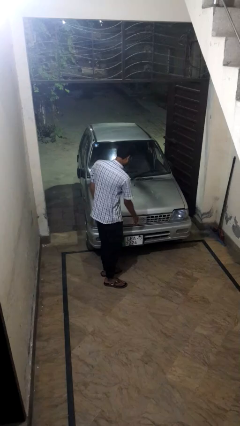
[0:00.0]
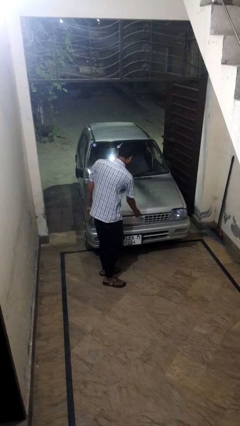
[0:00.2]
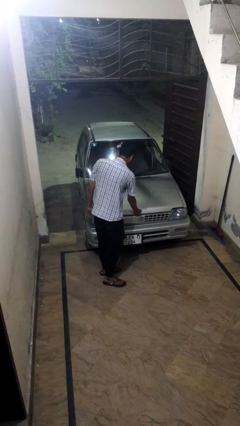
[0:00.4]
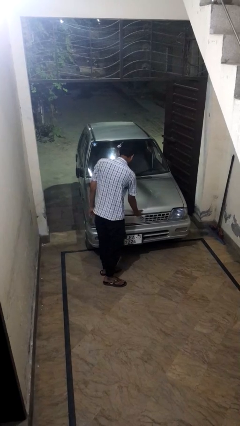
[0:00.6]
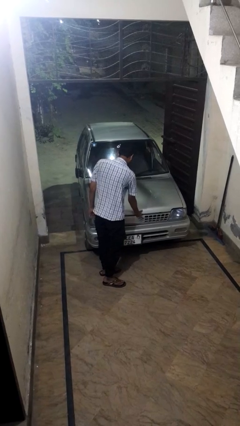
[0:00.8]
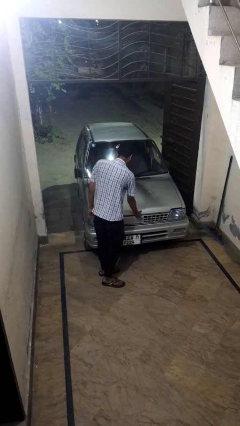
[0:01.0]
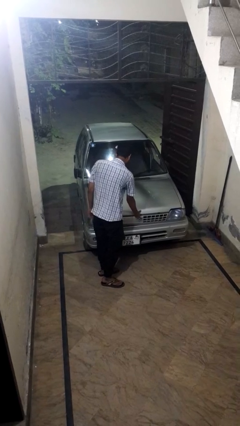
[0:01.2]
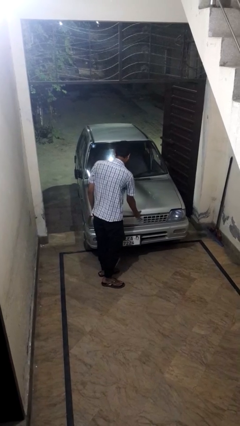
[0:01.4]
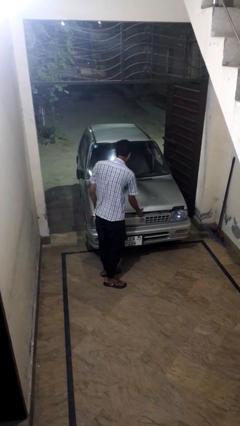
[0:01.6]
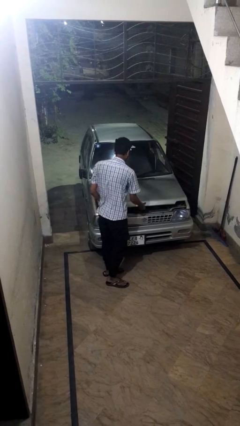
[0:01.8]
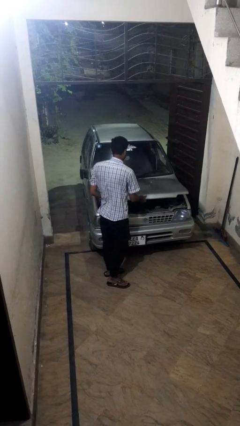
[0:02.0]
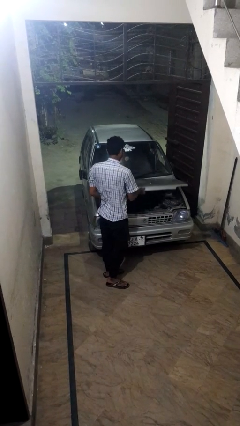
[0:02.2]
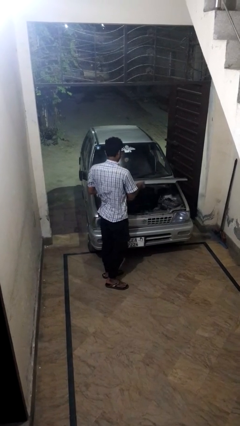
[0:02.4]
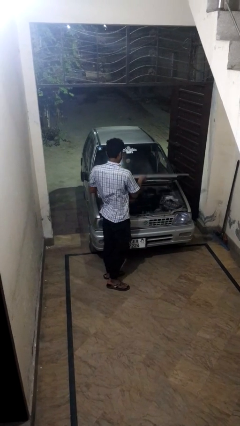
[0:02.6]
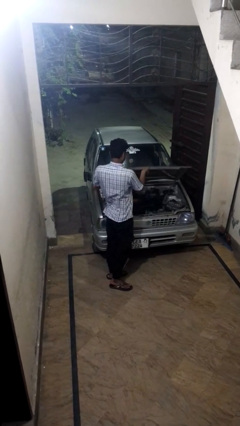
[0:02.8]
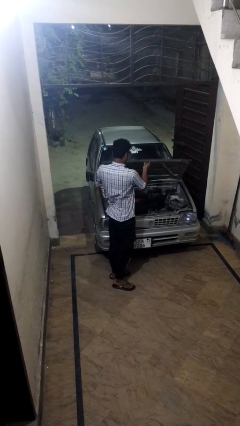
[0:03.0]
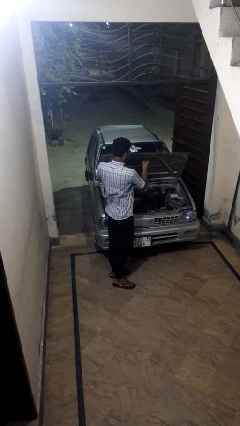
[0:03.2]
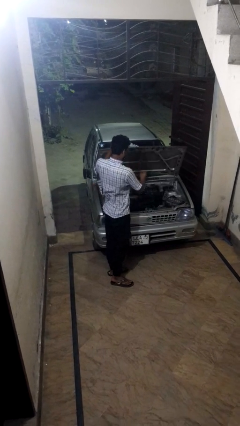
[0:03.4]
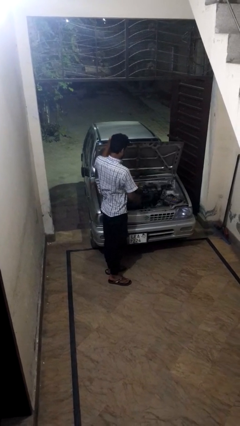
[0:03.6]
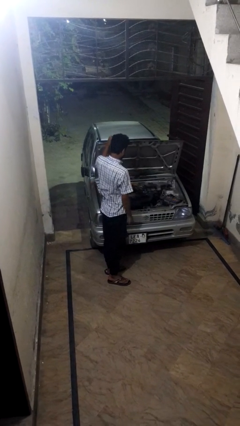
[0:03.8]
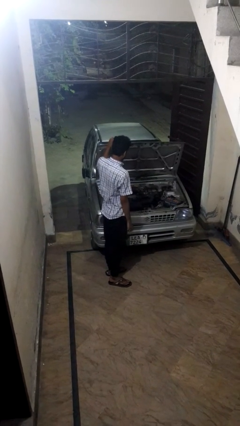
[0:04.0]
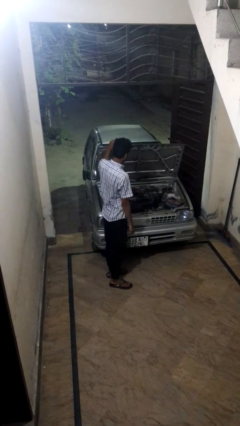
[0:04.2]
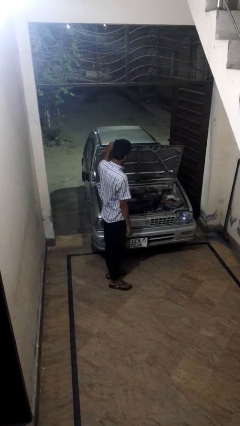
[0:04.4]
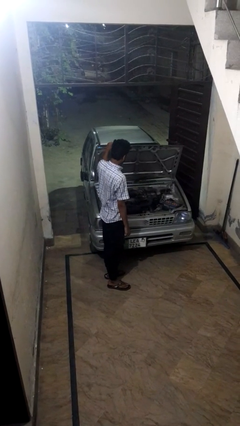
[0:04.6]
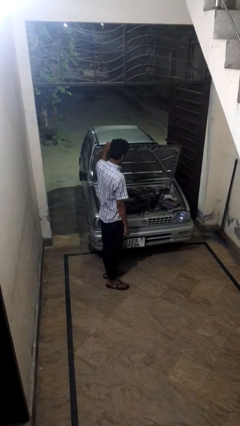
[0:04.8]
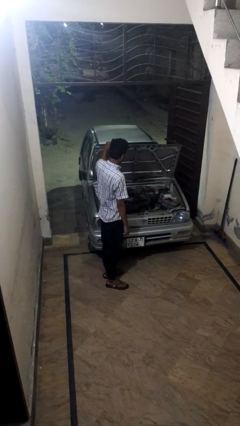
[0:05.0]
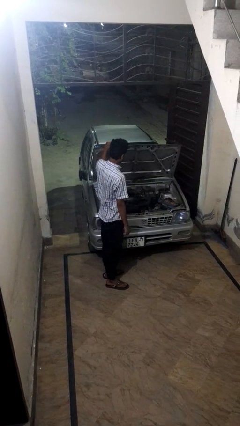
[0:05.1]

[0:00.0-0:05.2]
person opens car hood

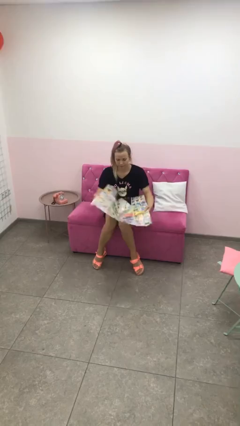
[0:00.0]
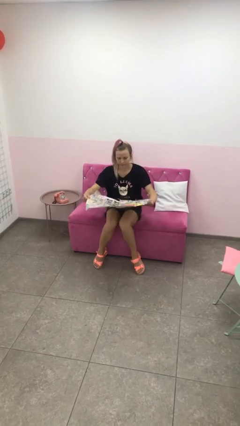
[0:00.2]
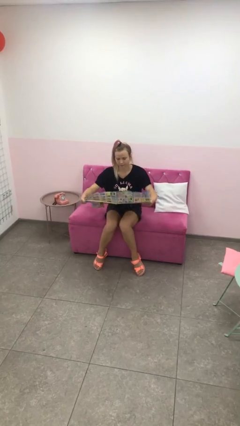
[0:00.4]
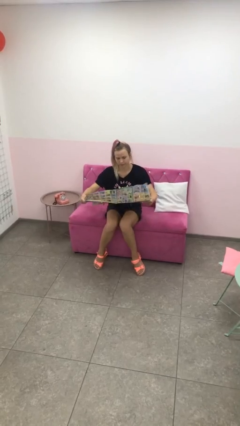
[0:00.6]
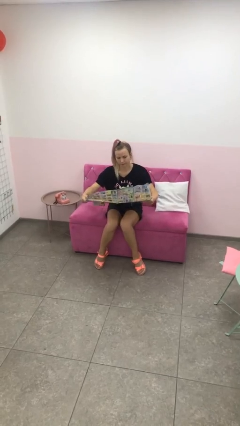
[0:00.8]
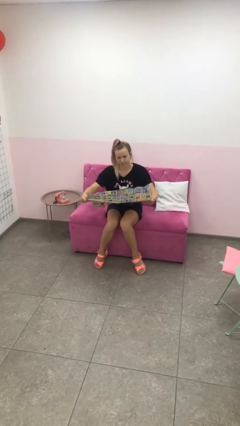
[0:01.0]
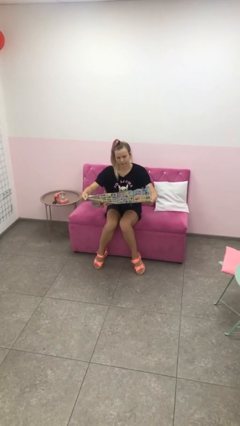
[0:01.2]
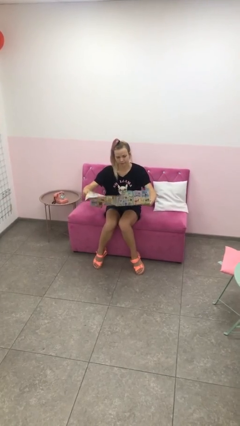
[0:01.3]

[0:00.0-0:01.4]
person reads newspaper

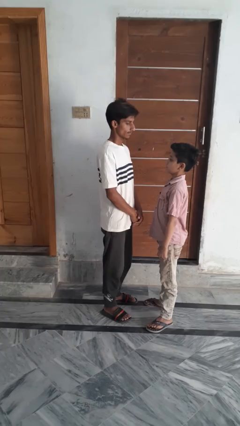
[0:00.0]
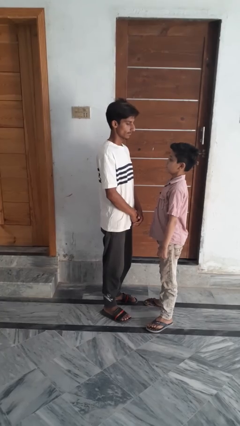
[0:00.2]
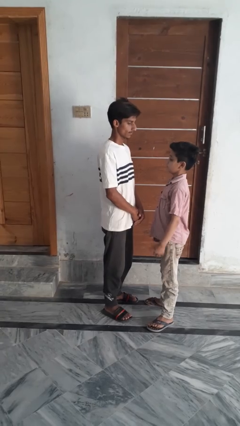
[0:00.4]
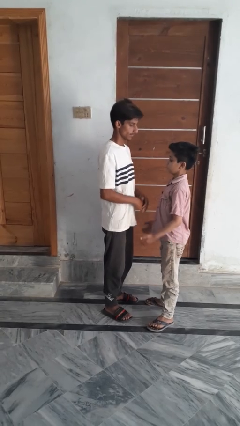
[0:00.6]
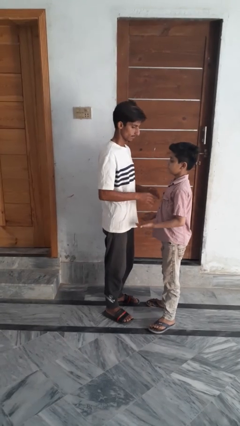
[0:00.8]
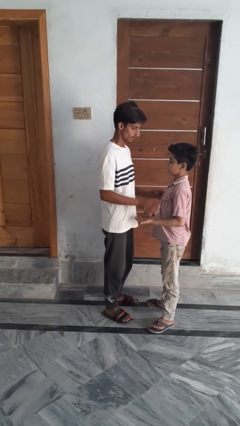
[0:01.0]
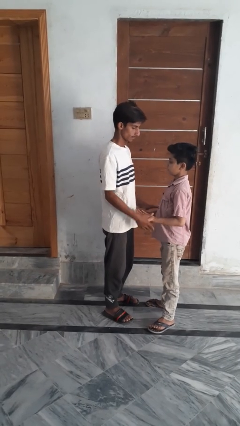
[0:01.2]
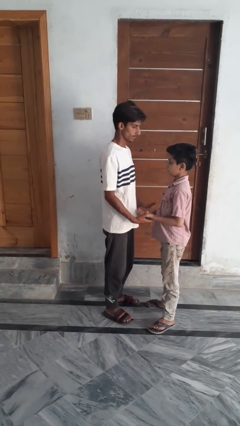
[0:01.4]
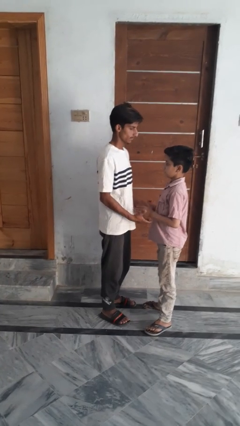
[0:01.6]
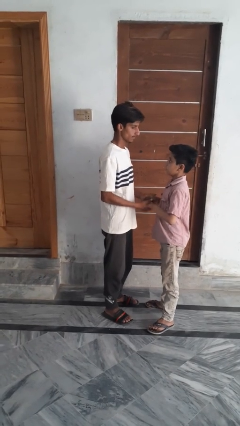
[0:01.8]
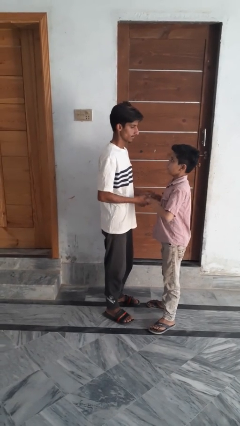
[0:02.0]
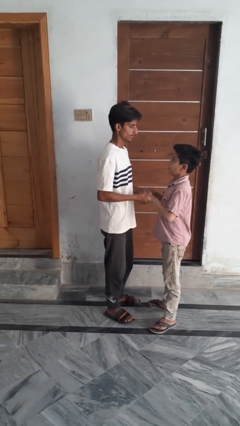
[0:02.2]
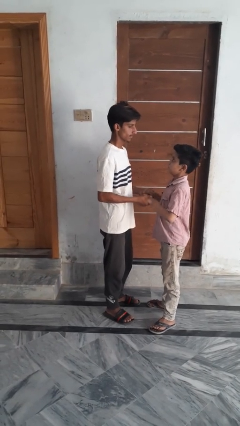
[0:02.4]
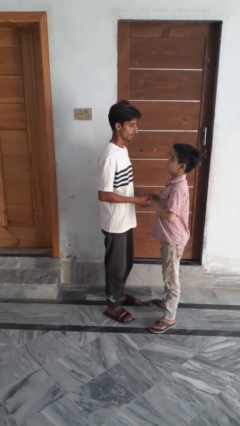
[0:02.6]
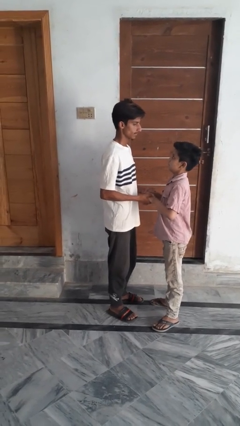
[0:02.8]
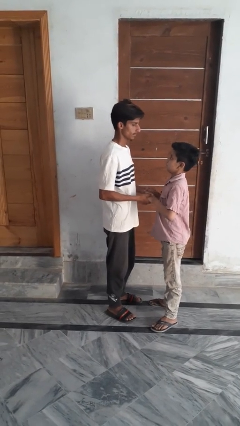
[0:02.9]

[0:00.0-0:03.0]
person highfives hand

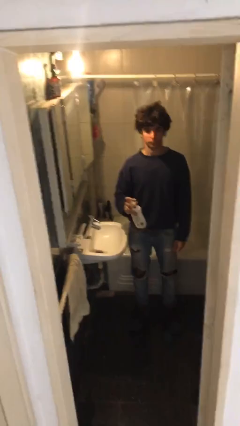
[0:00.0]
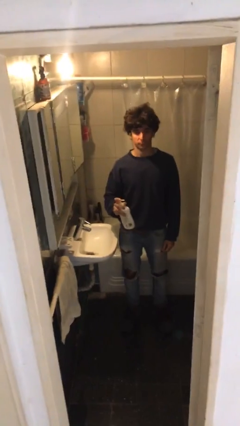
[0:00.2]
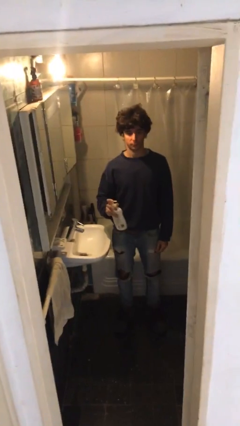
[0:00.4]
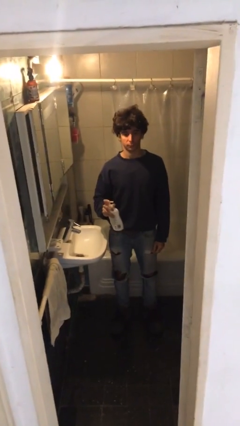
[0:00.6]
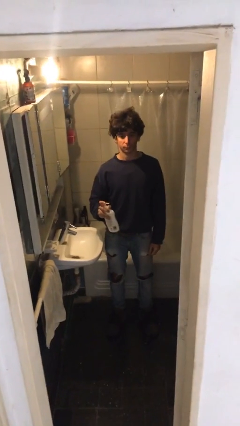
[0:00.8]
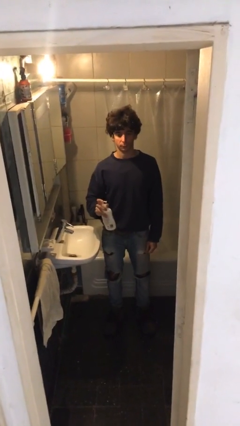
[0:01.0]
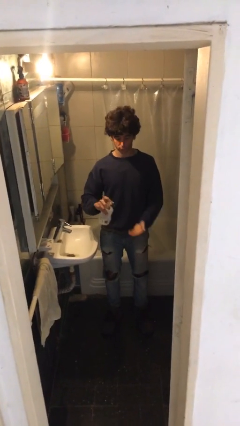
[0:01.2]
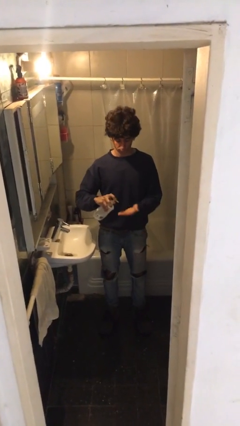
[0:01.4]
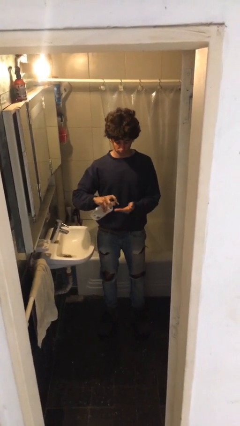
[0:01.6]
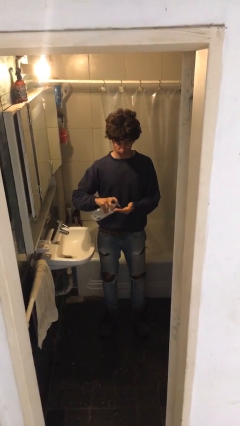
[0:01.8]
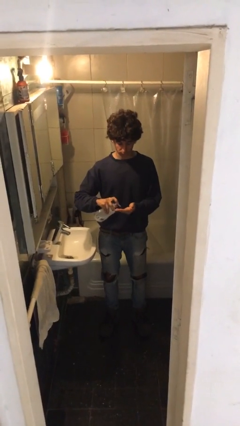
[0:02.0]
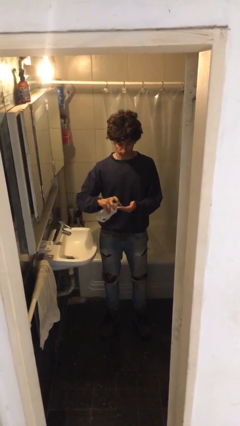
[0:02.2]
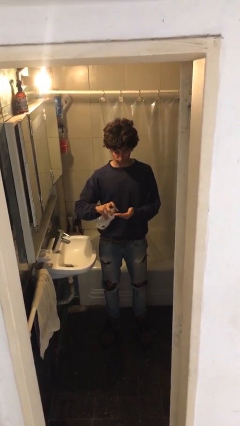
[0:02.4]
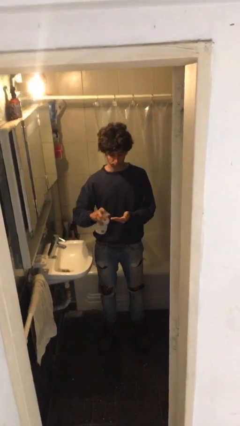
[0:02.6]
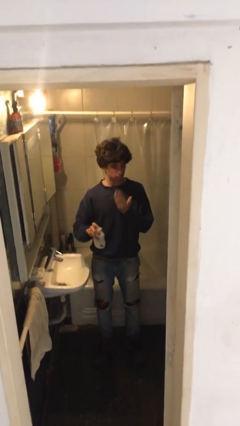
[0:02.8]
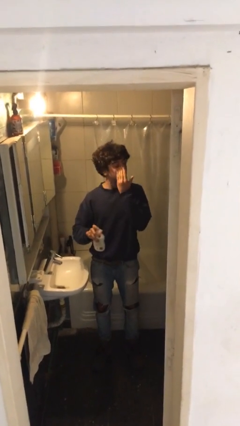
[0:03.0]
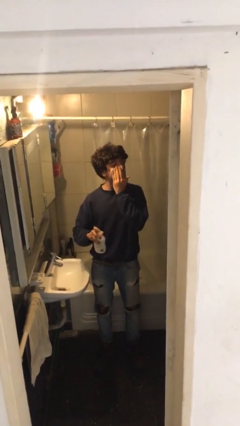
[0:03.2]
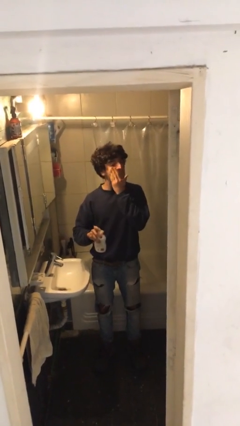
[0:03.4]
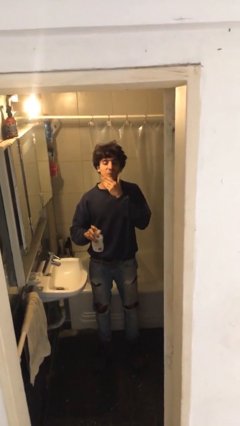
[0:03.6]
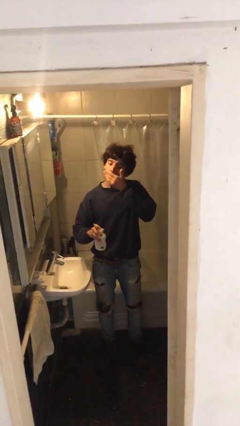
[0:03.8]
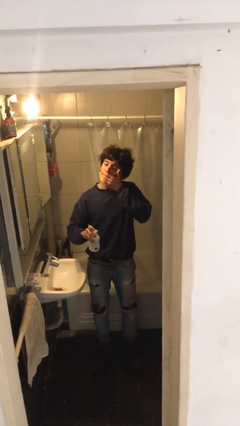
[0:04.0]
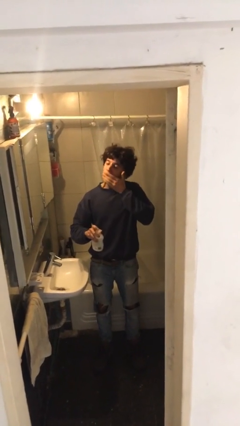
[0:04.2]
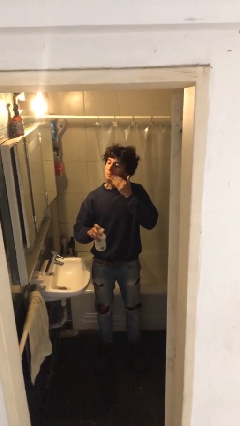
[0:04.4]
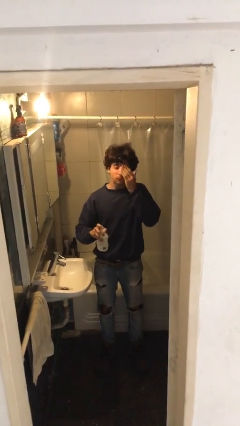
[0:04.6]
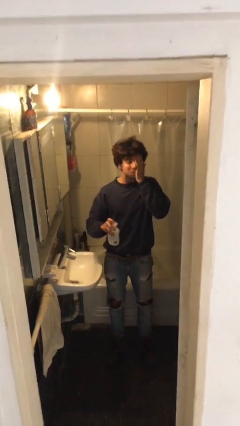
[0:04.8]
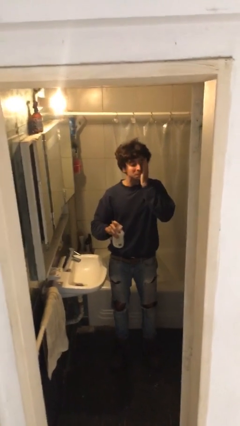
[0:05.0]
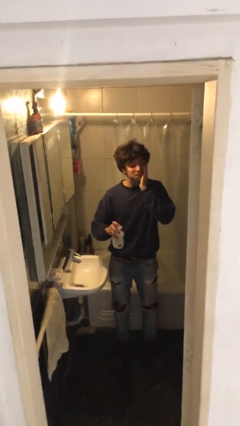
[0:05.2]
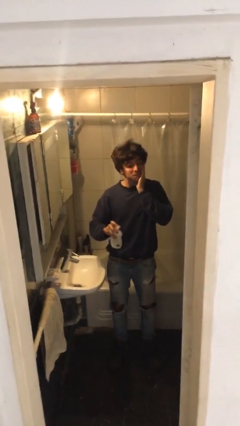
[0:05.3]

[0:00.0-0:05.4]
person applies facial moisturizer

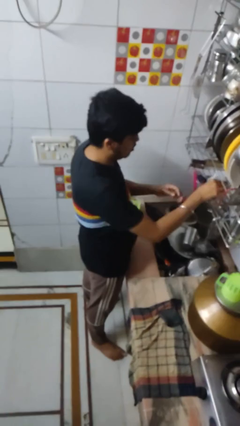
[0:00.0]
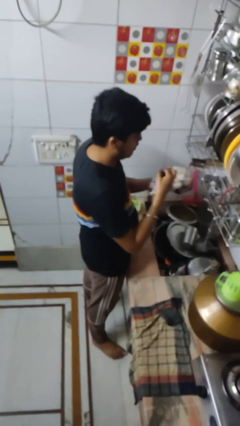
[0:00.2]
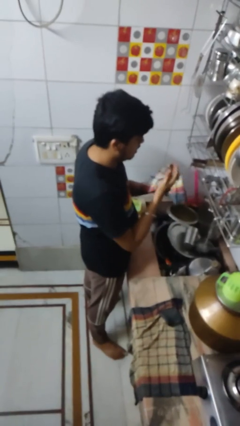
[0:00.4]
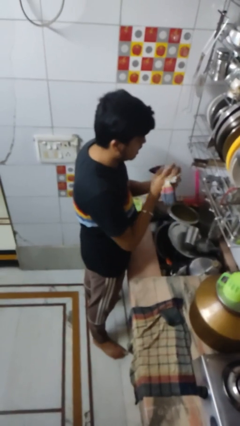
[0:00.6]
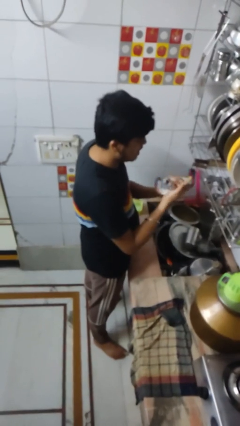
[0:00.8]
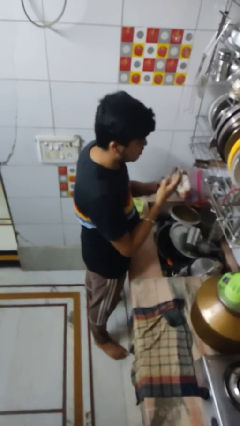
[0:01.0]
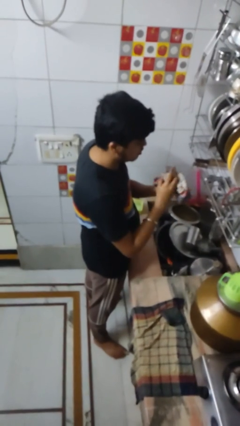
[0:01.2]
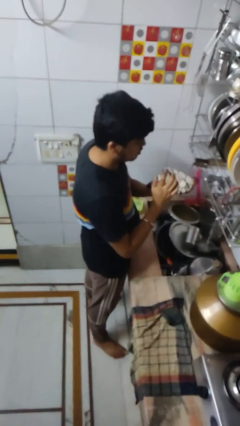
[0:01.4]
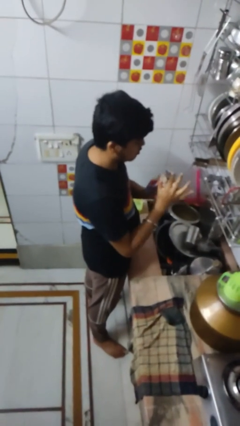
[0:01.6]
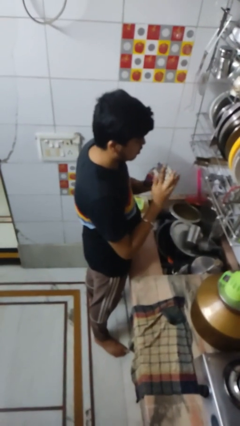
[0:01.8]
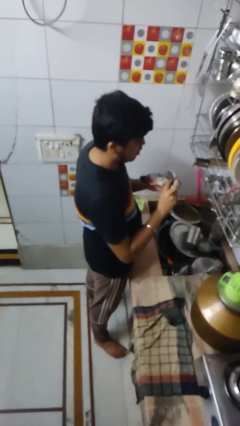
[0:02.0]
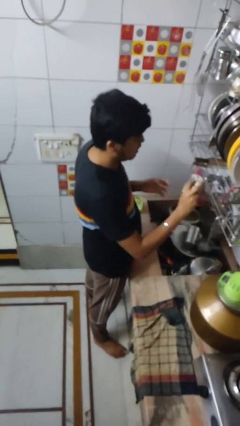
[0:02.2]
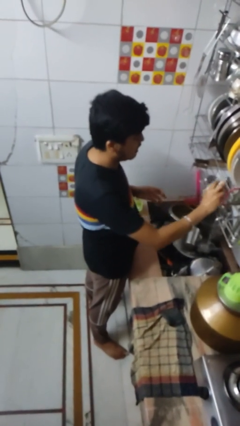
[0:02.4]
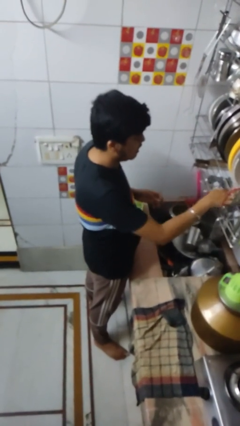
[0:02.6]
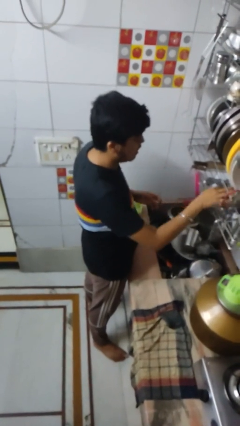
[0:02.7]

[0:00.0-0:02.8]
person dries hands with towel
